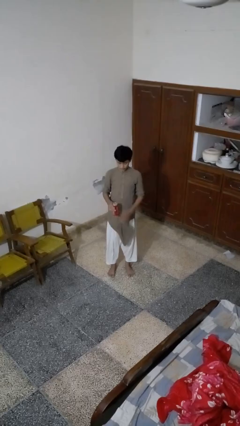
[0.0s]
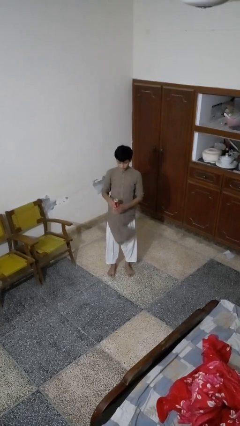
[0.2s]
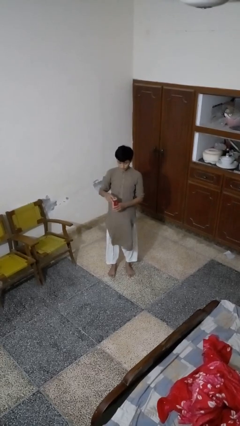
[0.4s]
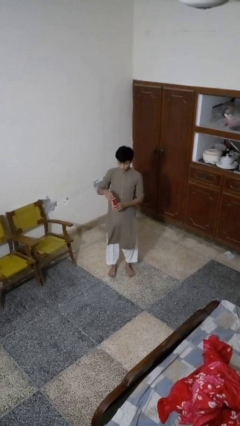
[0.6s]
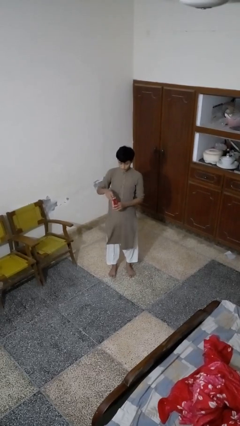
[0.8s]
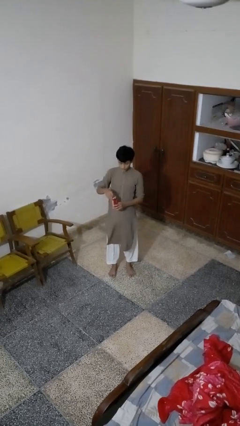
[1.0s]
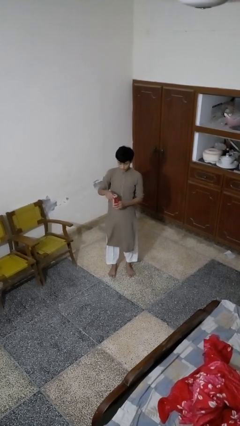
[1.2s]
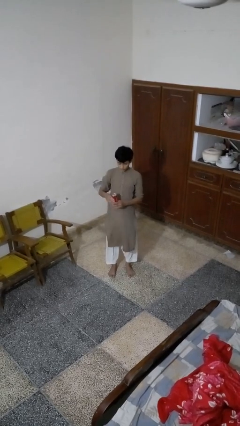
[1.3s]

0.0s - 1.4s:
person opens beverage can

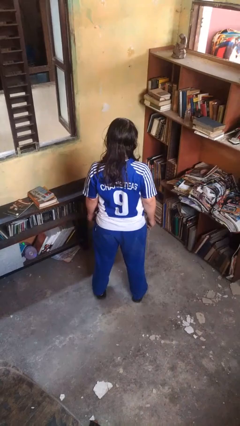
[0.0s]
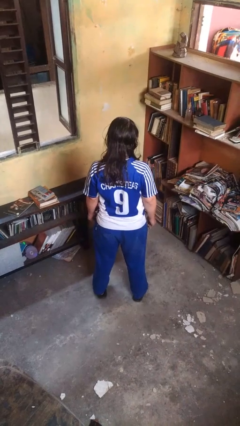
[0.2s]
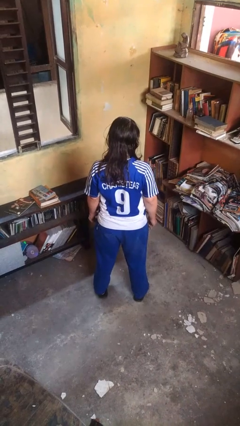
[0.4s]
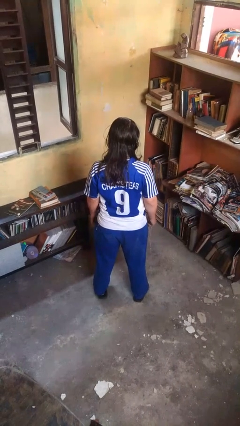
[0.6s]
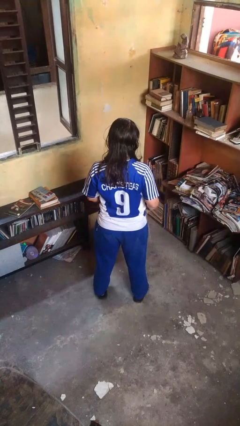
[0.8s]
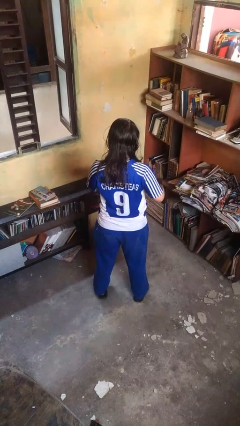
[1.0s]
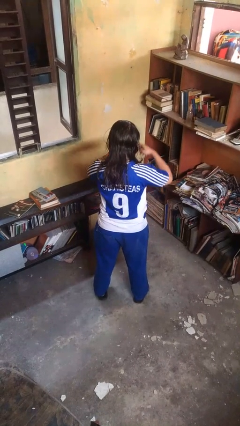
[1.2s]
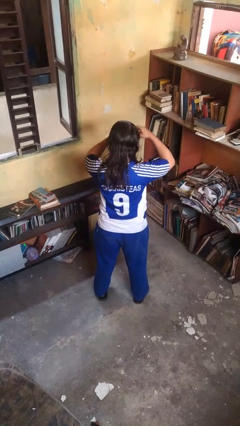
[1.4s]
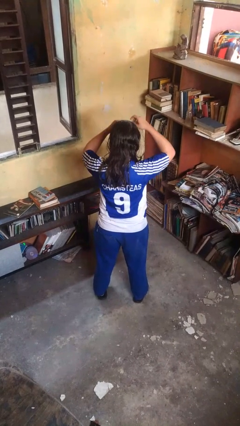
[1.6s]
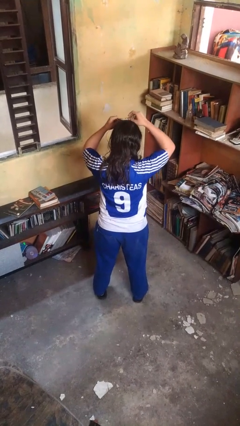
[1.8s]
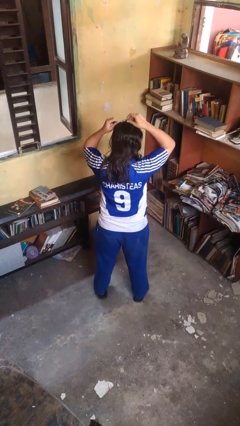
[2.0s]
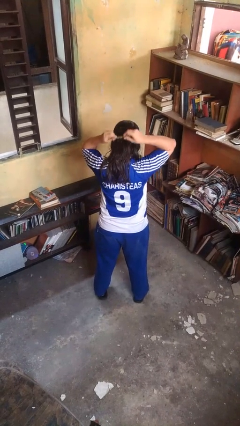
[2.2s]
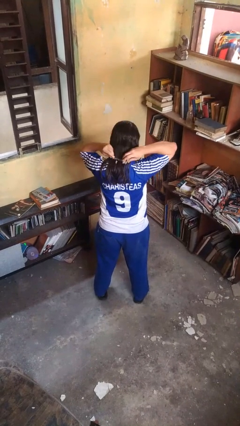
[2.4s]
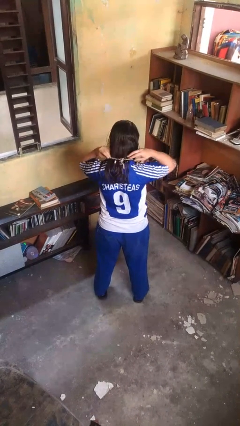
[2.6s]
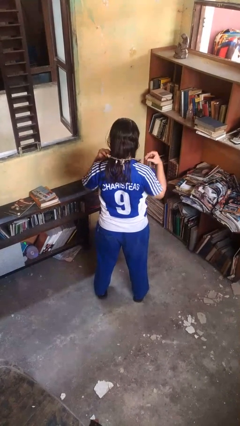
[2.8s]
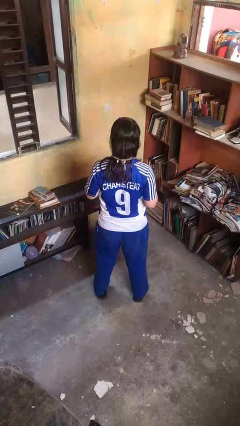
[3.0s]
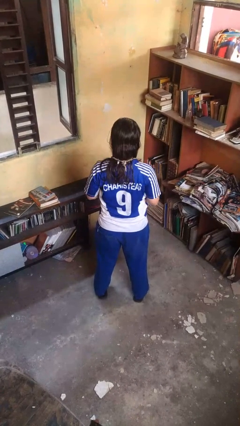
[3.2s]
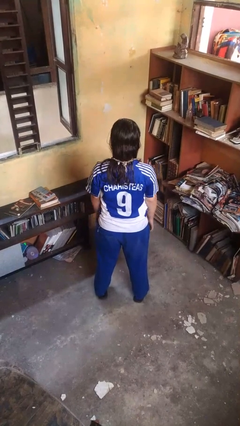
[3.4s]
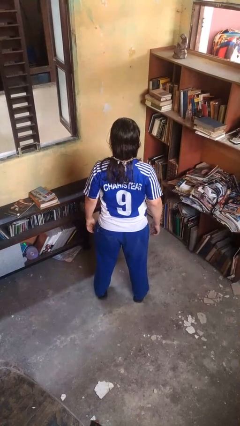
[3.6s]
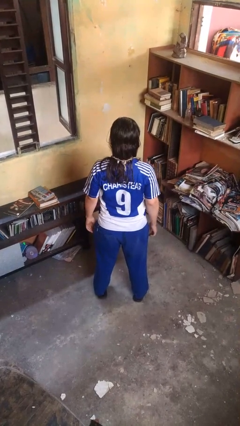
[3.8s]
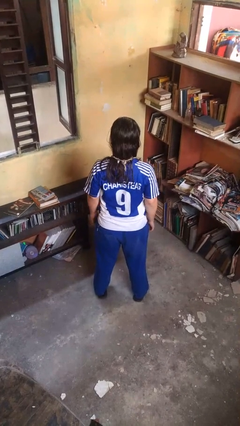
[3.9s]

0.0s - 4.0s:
person puts on necklace

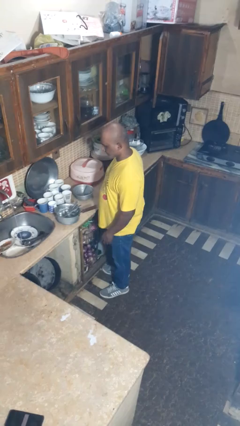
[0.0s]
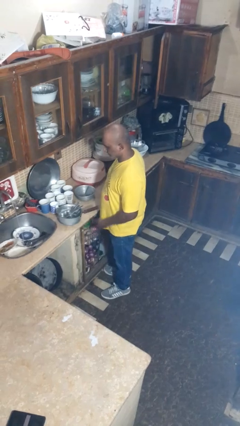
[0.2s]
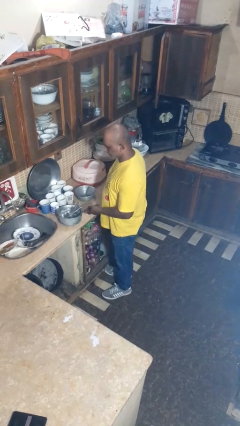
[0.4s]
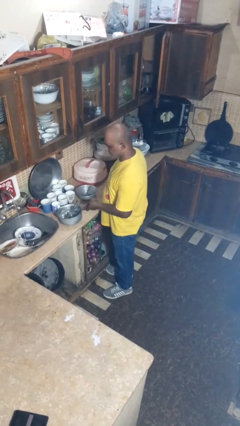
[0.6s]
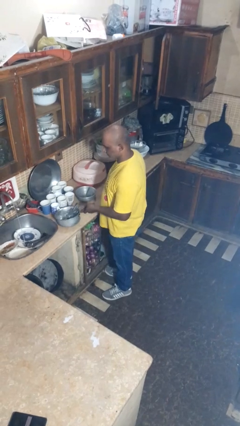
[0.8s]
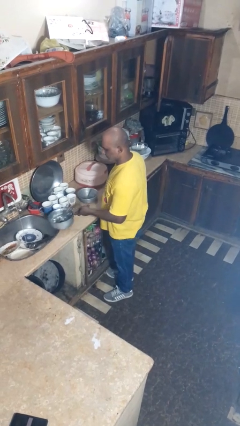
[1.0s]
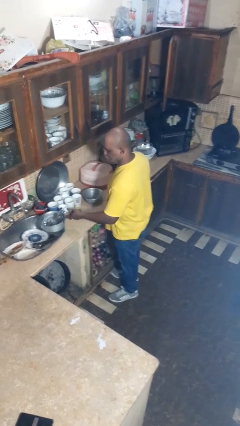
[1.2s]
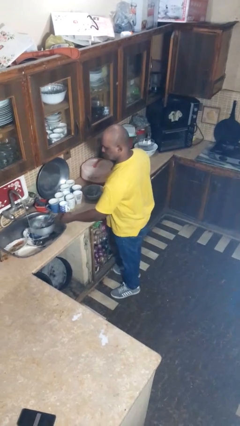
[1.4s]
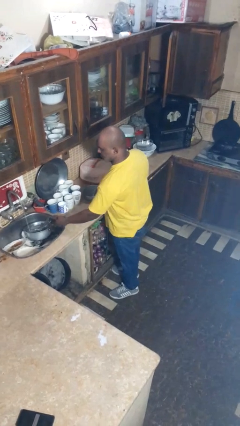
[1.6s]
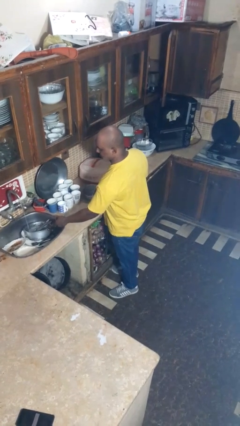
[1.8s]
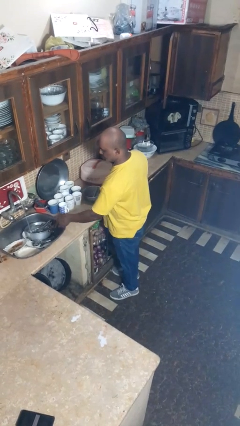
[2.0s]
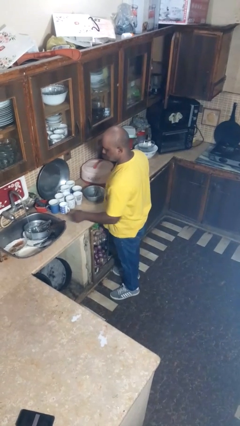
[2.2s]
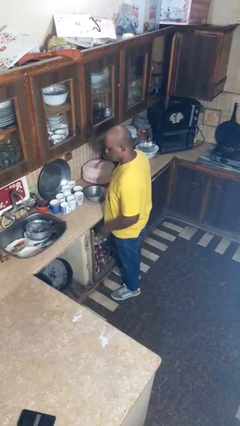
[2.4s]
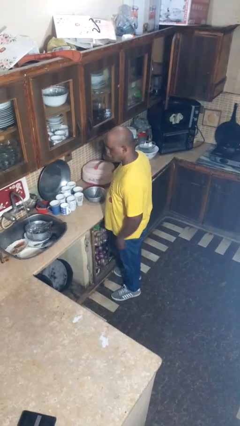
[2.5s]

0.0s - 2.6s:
person loads dishwasher

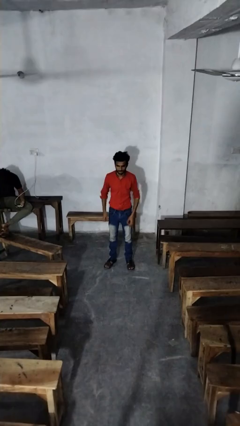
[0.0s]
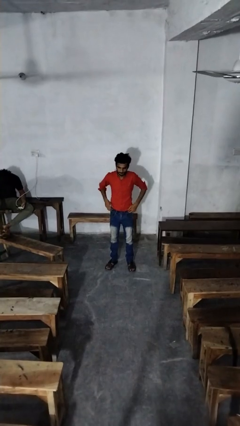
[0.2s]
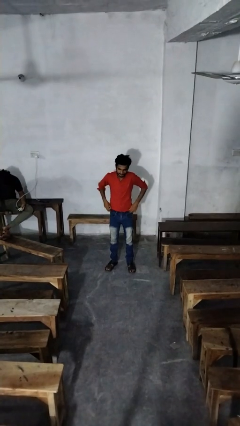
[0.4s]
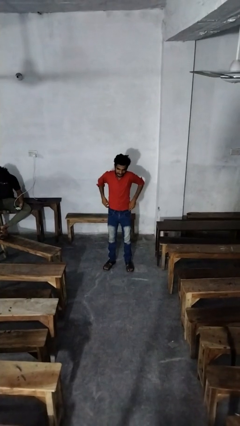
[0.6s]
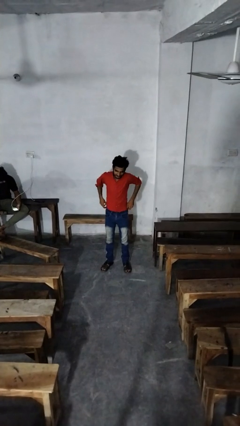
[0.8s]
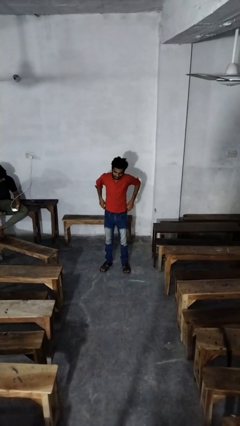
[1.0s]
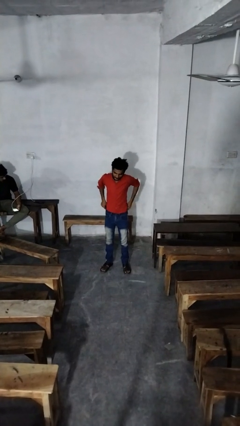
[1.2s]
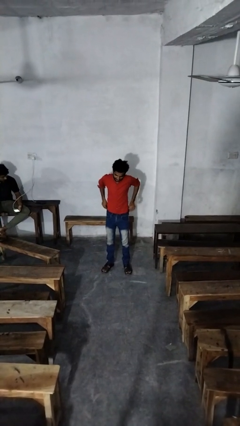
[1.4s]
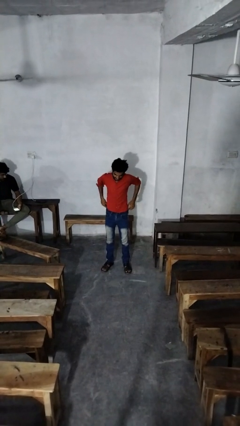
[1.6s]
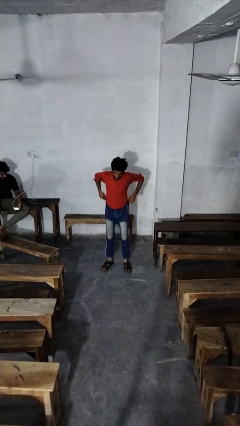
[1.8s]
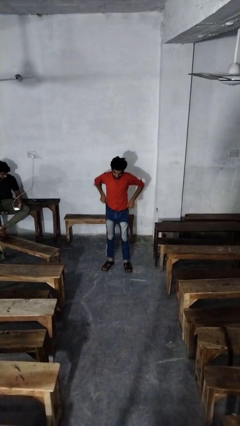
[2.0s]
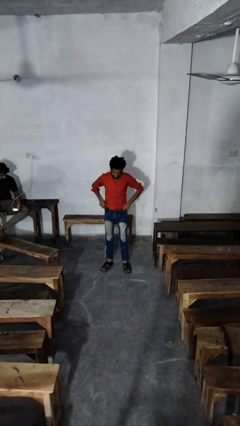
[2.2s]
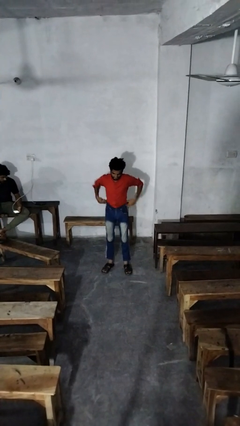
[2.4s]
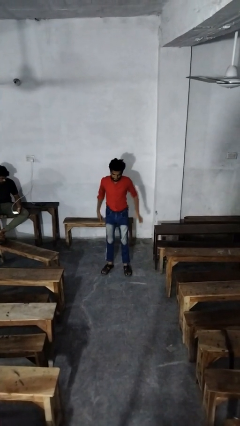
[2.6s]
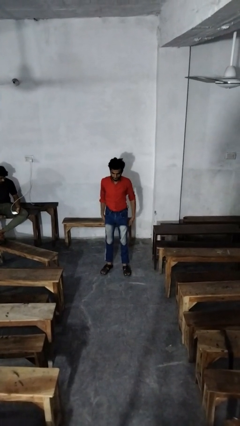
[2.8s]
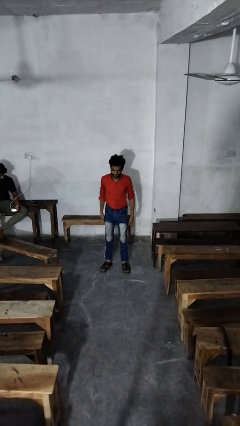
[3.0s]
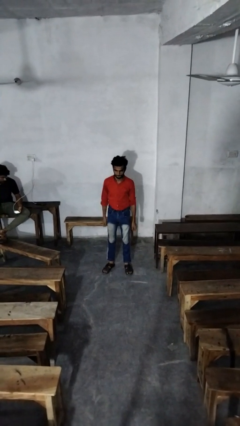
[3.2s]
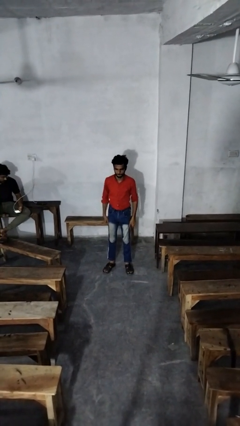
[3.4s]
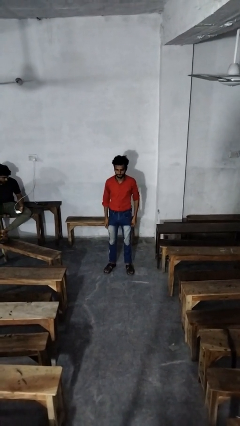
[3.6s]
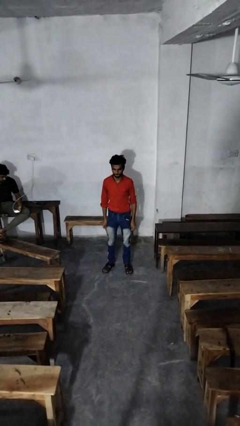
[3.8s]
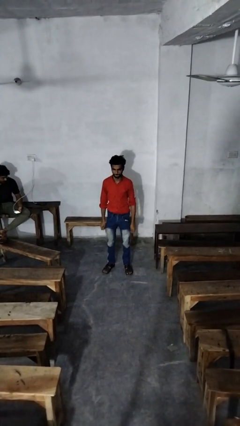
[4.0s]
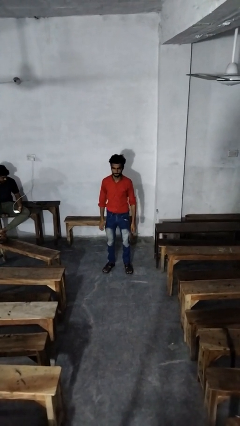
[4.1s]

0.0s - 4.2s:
person hikes up pants

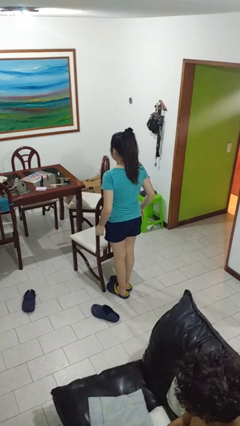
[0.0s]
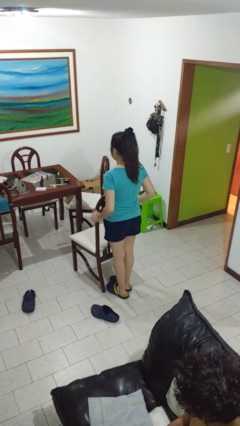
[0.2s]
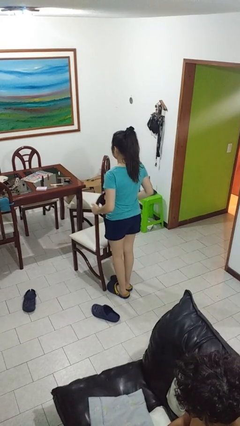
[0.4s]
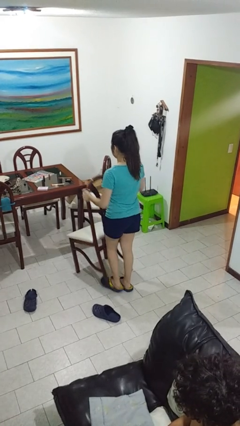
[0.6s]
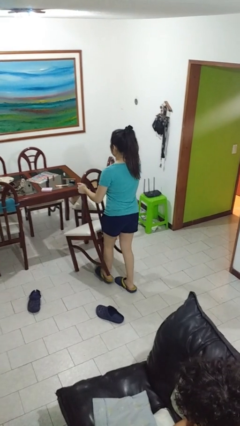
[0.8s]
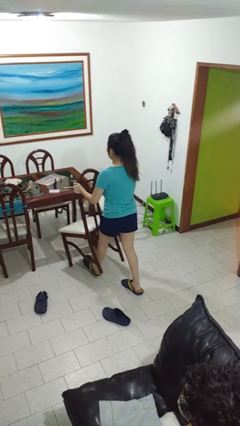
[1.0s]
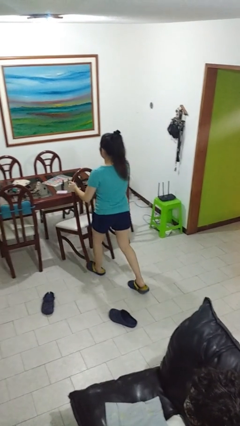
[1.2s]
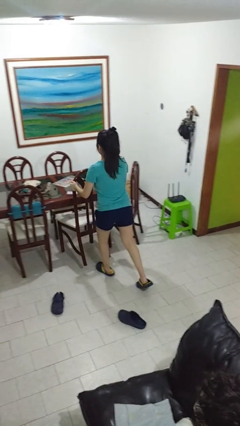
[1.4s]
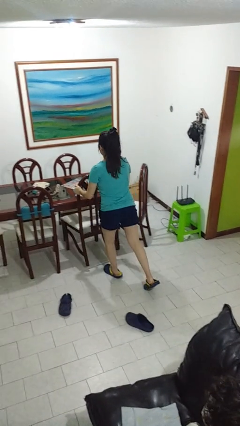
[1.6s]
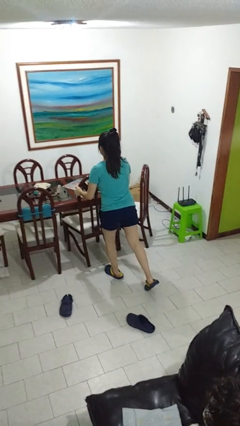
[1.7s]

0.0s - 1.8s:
person pushes in chair

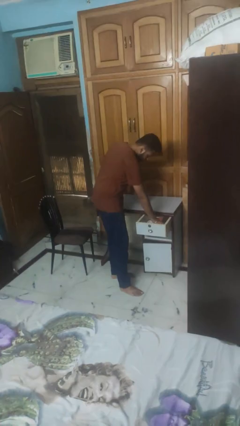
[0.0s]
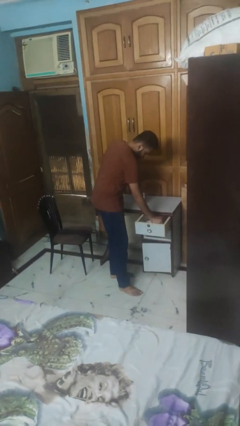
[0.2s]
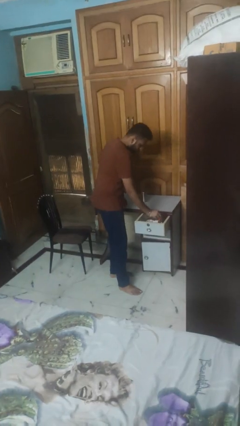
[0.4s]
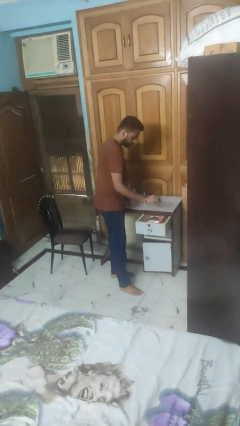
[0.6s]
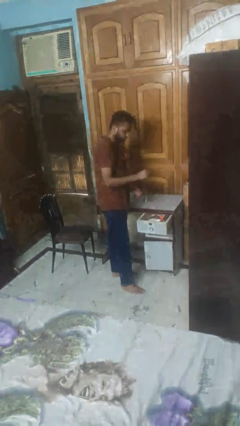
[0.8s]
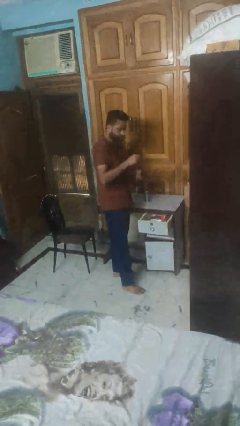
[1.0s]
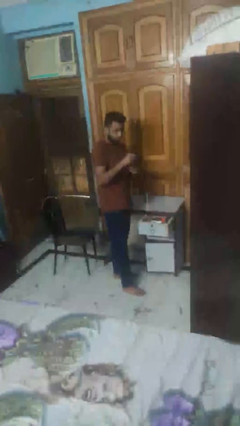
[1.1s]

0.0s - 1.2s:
person takes object from kitchen drawer

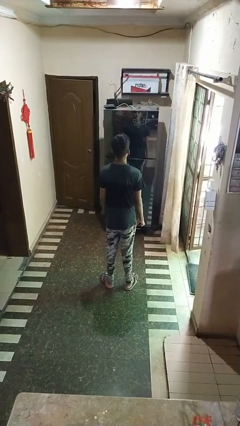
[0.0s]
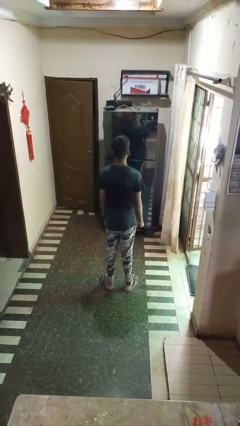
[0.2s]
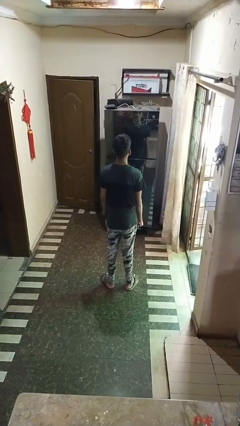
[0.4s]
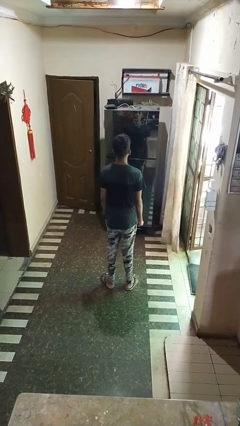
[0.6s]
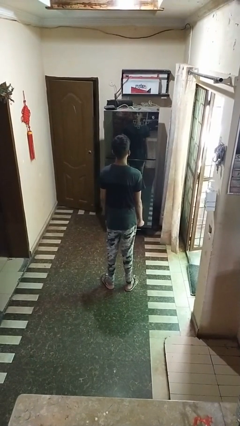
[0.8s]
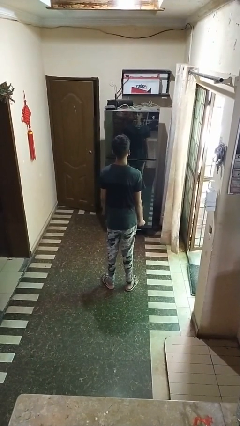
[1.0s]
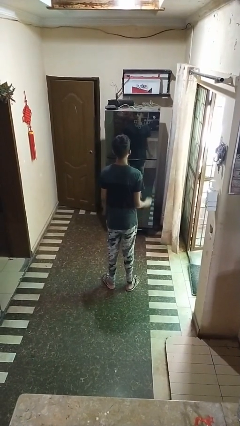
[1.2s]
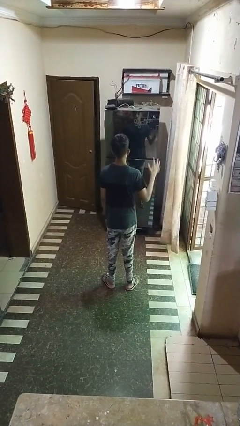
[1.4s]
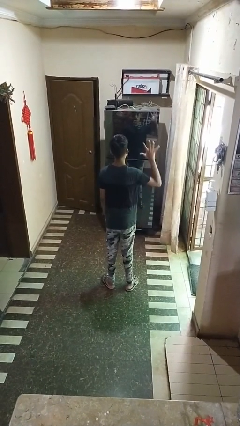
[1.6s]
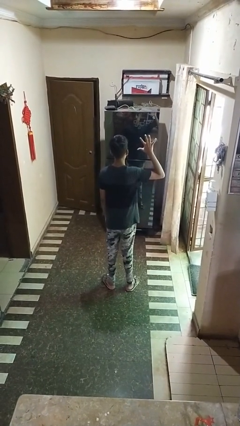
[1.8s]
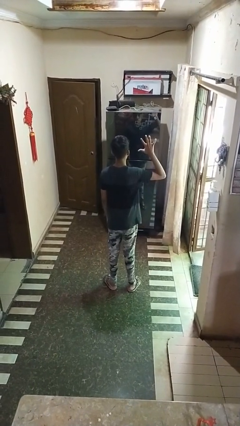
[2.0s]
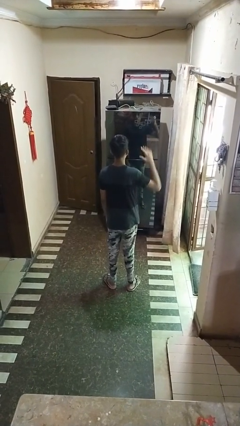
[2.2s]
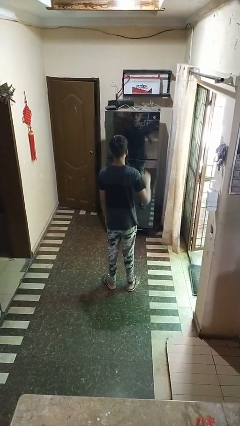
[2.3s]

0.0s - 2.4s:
person gestures number five
